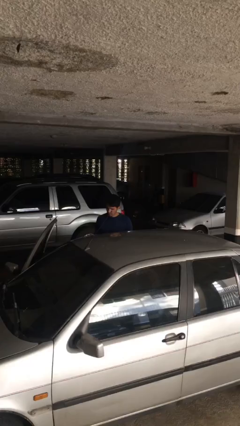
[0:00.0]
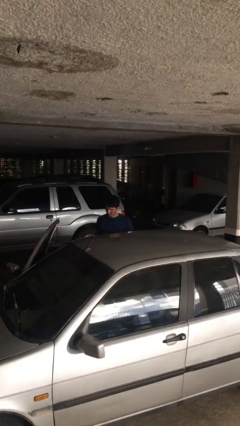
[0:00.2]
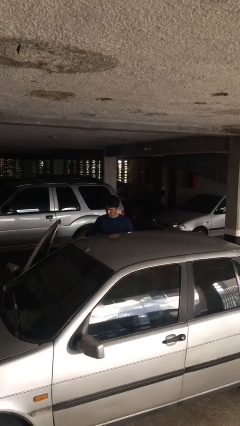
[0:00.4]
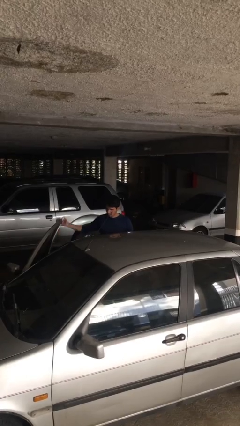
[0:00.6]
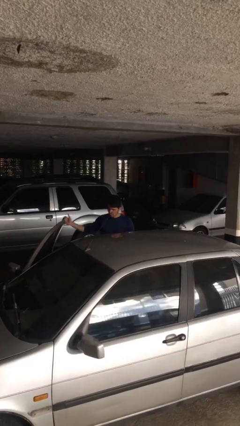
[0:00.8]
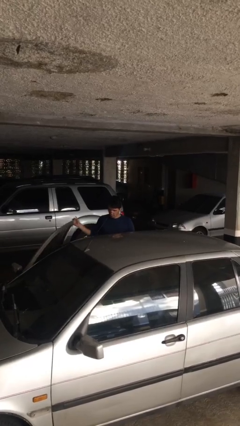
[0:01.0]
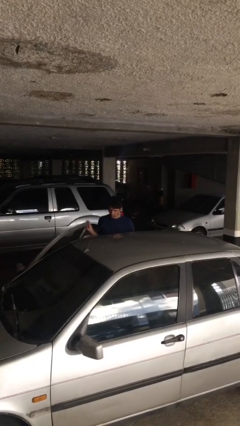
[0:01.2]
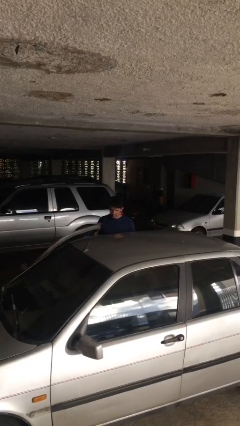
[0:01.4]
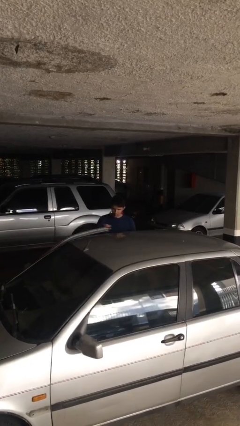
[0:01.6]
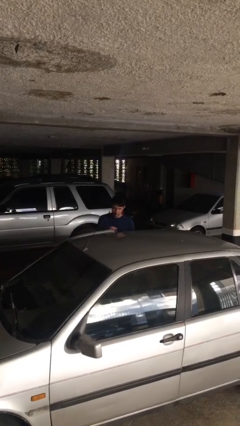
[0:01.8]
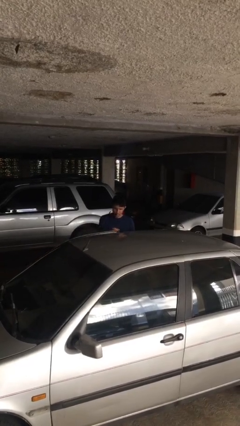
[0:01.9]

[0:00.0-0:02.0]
person closes car door

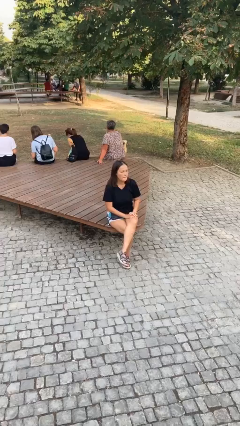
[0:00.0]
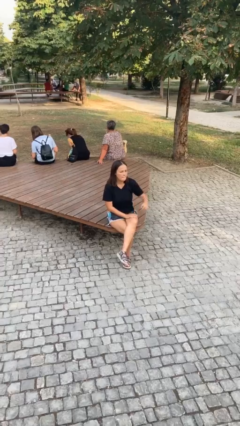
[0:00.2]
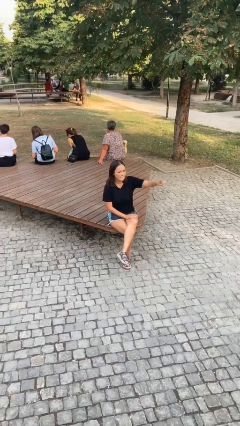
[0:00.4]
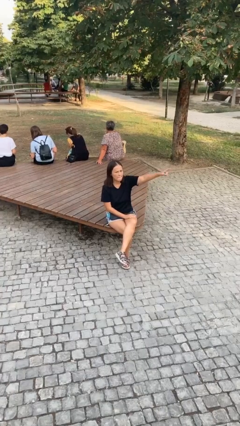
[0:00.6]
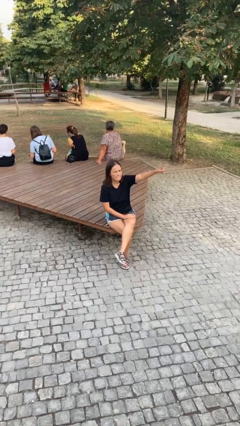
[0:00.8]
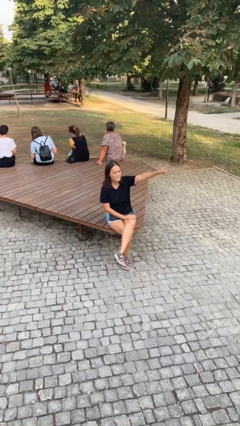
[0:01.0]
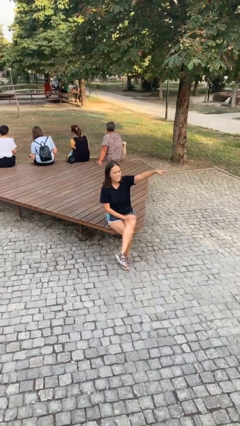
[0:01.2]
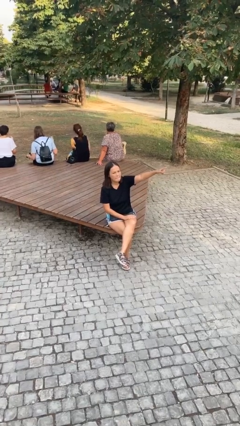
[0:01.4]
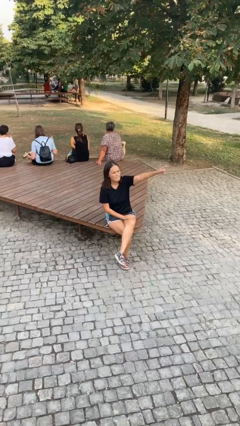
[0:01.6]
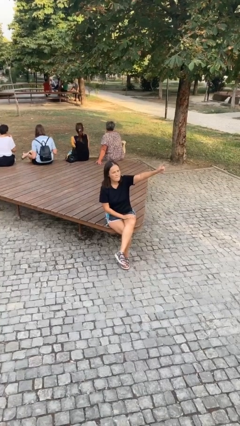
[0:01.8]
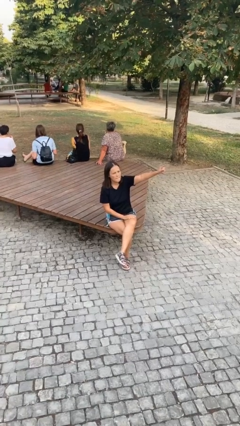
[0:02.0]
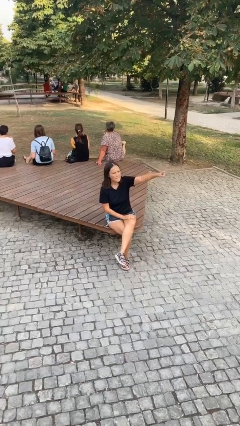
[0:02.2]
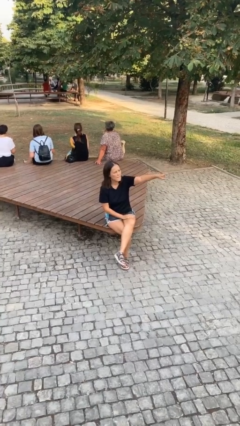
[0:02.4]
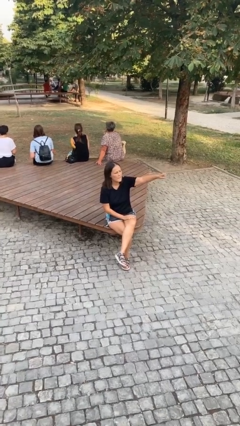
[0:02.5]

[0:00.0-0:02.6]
person points at person

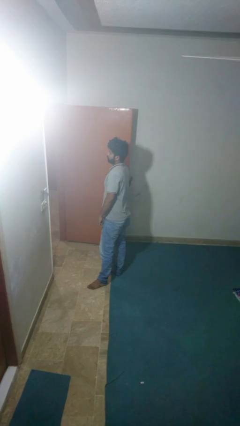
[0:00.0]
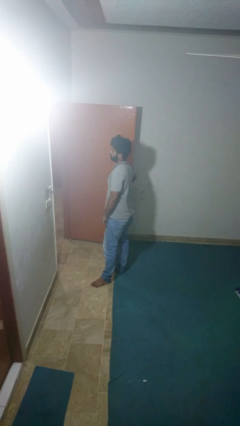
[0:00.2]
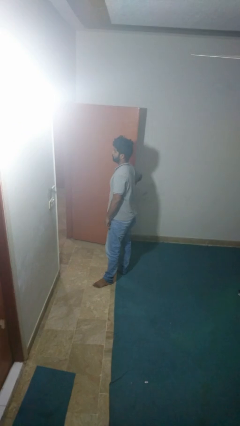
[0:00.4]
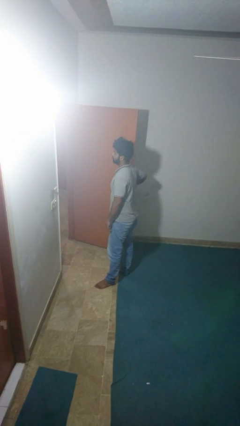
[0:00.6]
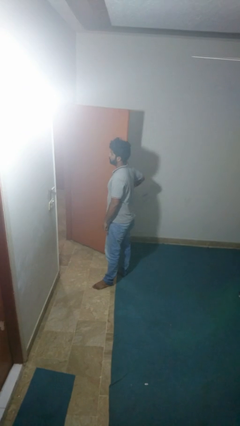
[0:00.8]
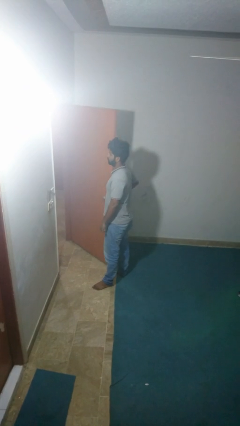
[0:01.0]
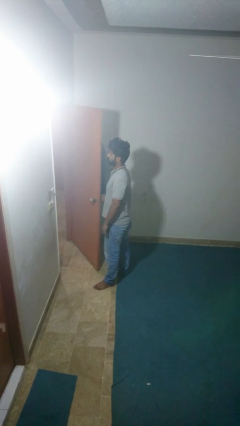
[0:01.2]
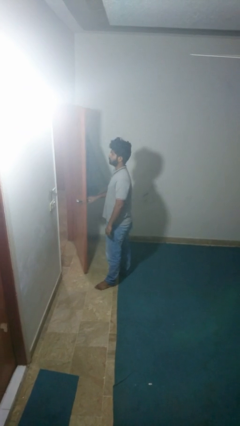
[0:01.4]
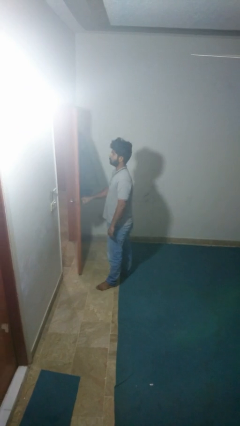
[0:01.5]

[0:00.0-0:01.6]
person closes facility door

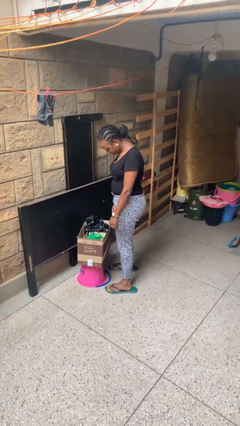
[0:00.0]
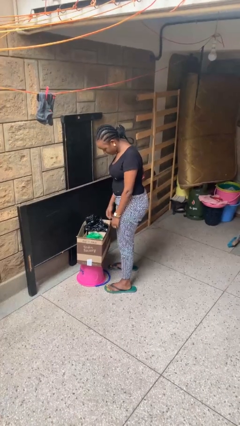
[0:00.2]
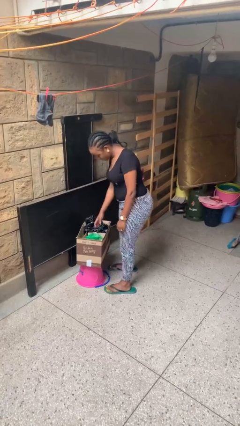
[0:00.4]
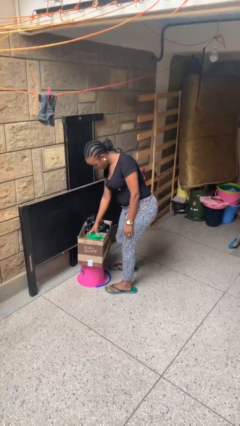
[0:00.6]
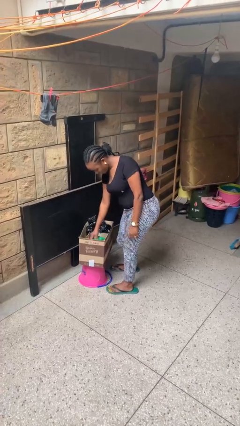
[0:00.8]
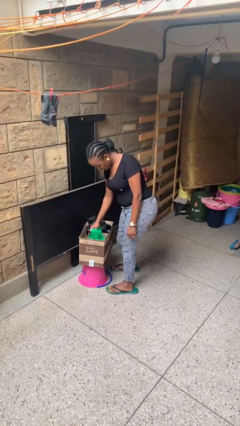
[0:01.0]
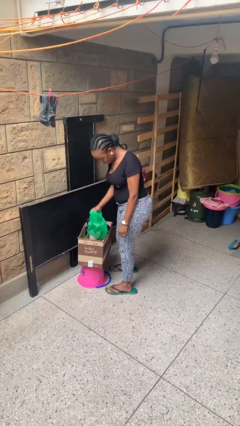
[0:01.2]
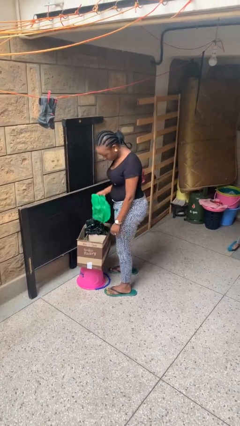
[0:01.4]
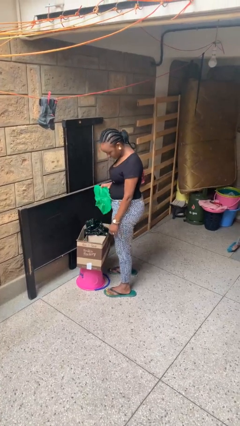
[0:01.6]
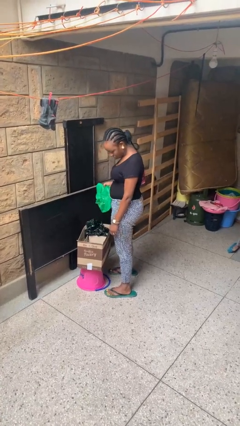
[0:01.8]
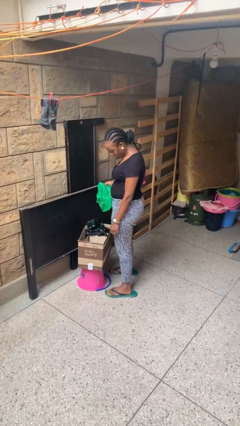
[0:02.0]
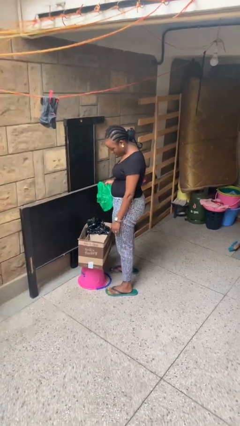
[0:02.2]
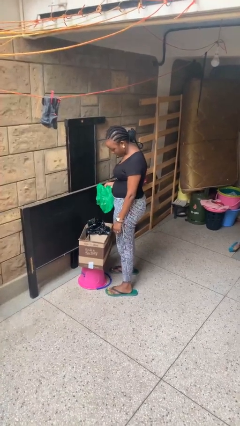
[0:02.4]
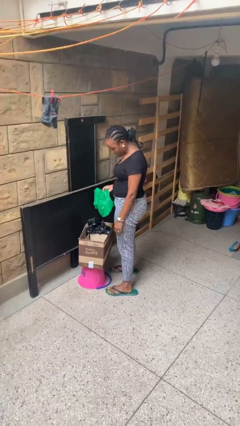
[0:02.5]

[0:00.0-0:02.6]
person takes object from box

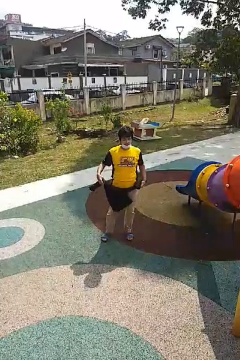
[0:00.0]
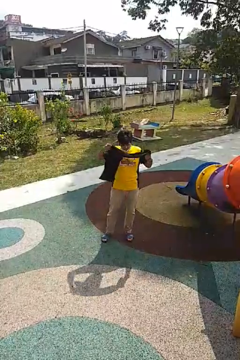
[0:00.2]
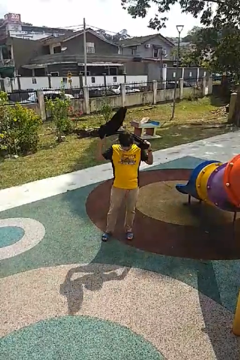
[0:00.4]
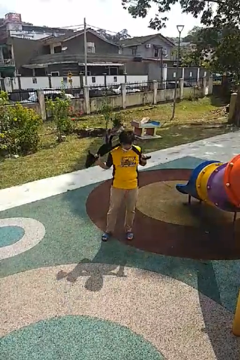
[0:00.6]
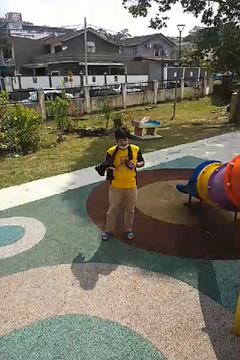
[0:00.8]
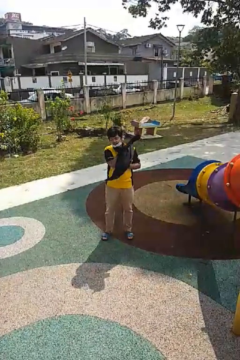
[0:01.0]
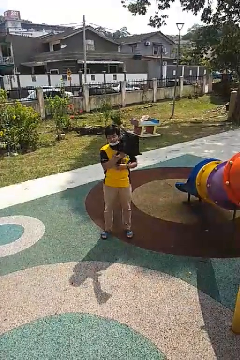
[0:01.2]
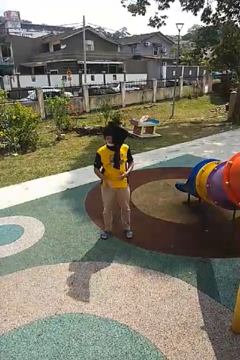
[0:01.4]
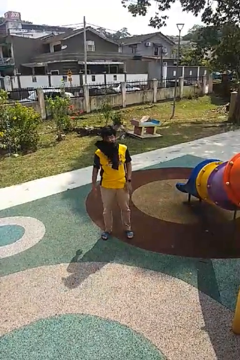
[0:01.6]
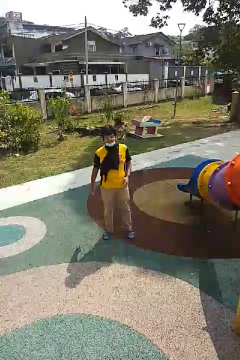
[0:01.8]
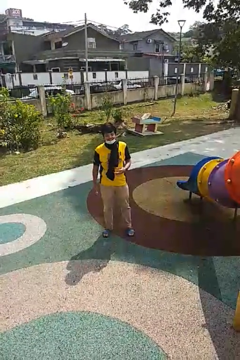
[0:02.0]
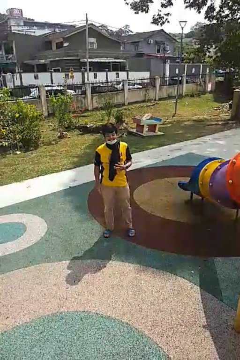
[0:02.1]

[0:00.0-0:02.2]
person puts on scarf

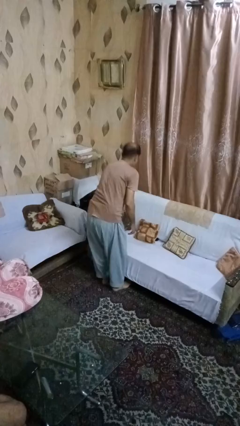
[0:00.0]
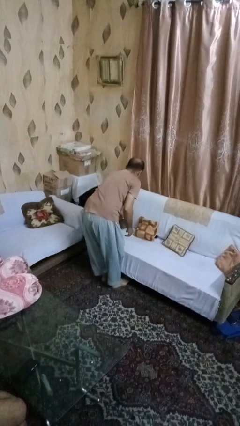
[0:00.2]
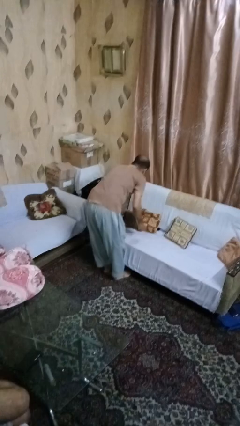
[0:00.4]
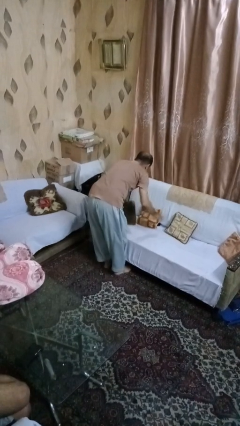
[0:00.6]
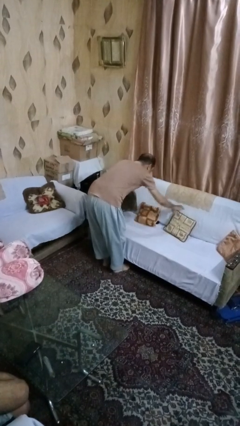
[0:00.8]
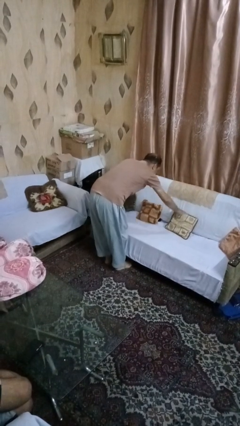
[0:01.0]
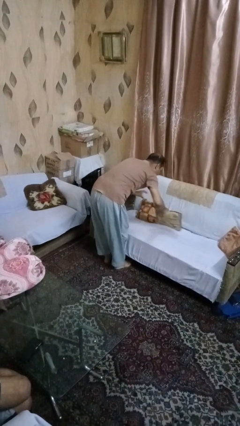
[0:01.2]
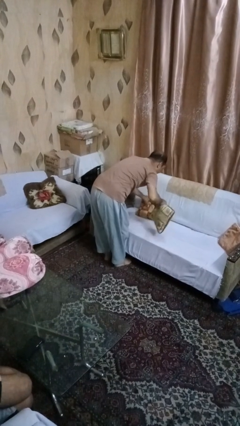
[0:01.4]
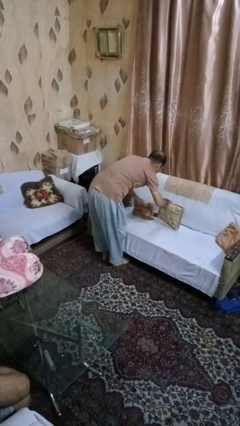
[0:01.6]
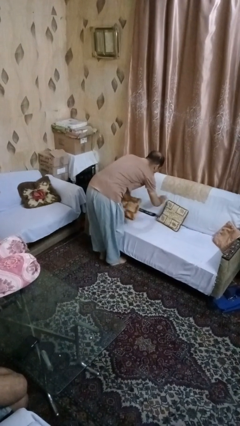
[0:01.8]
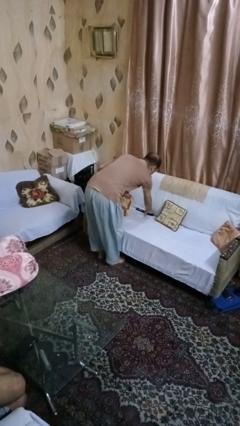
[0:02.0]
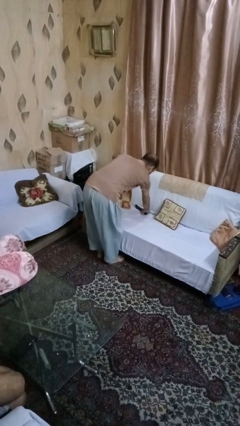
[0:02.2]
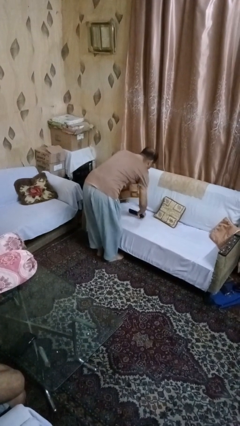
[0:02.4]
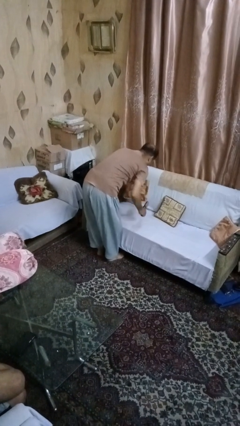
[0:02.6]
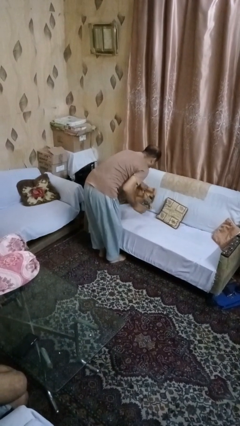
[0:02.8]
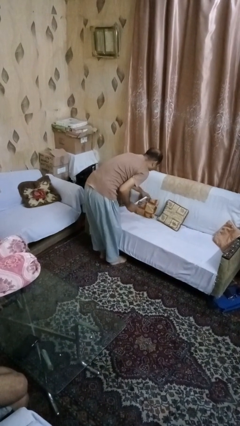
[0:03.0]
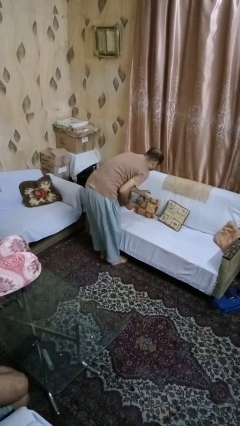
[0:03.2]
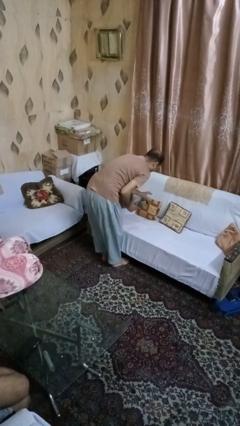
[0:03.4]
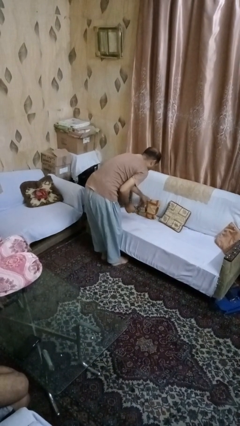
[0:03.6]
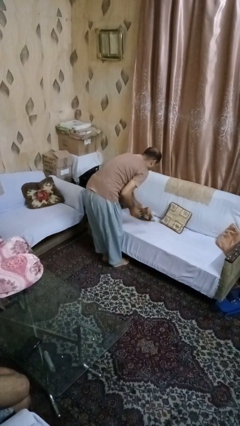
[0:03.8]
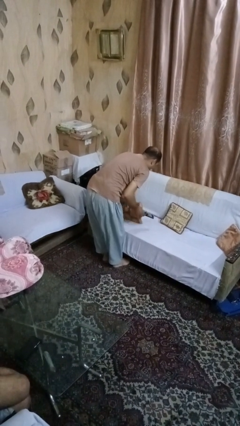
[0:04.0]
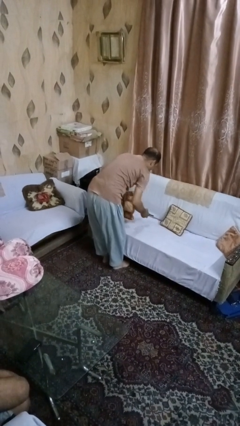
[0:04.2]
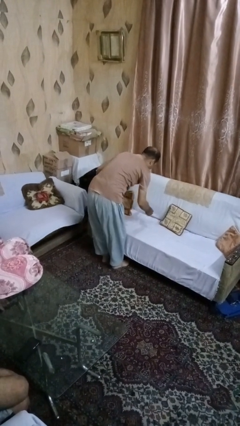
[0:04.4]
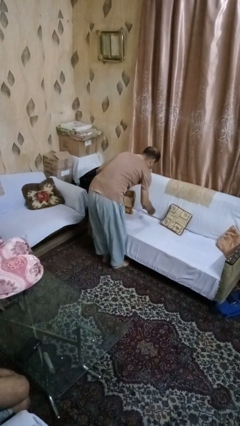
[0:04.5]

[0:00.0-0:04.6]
person searches in couch

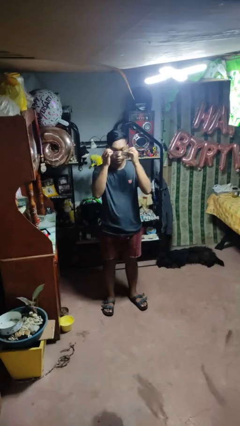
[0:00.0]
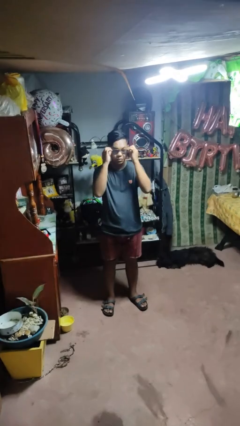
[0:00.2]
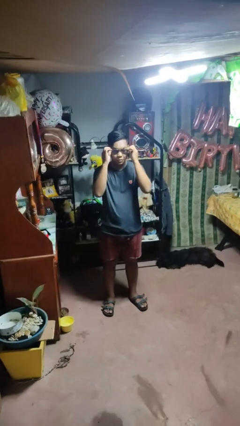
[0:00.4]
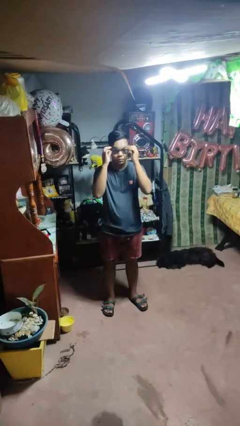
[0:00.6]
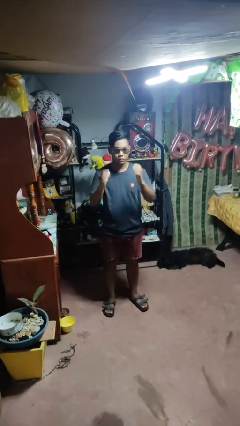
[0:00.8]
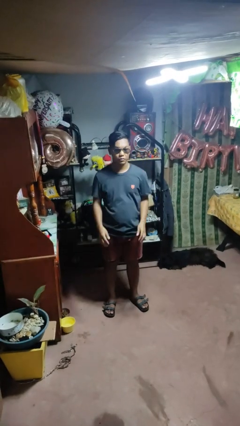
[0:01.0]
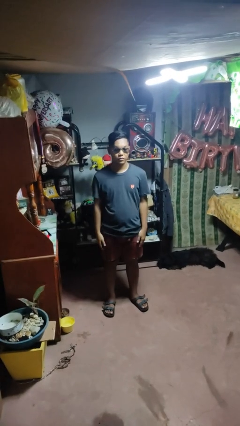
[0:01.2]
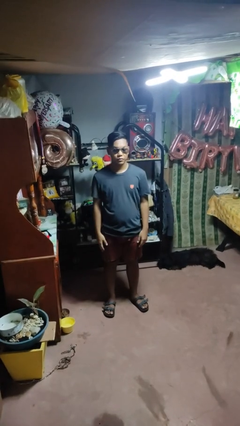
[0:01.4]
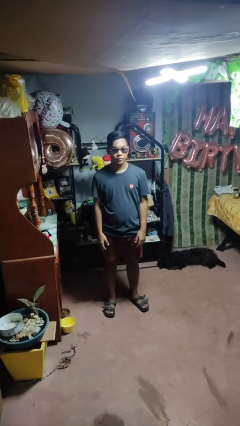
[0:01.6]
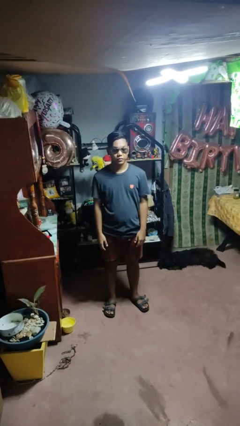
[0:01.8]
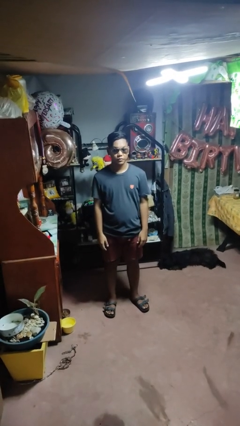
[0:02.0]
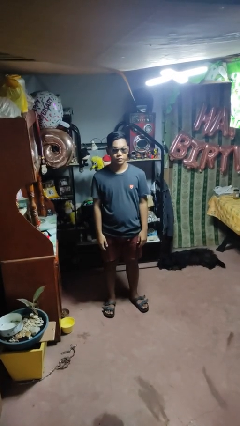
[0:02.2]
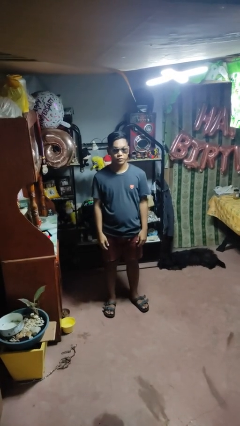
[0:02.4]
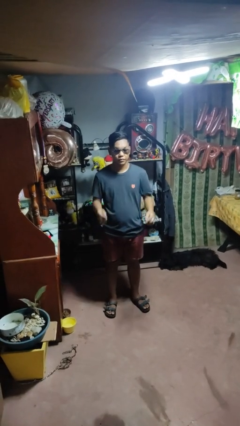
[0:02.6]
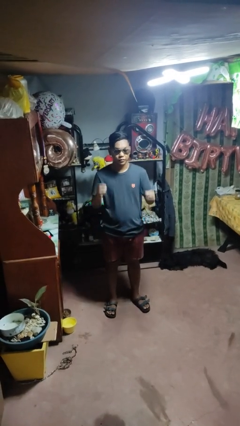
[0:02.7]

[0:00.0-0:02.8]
person puts on sunglasses
